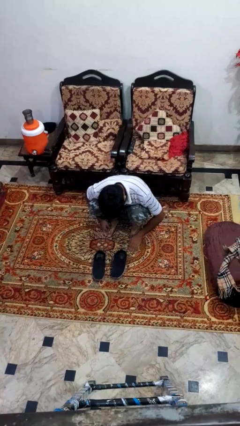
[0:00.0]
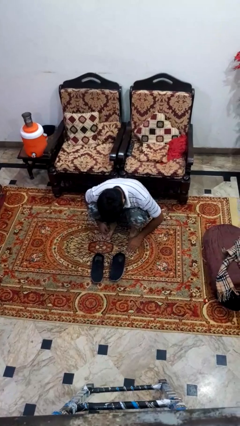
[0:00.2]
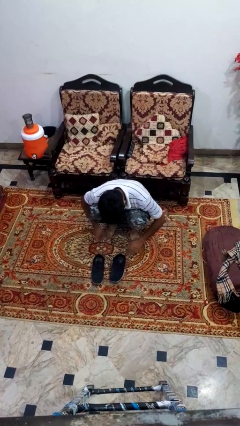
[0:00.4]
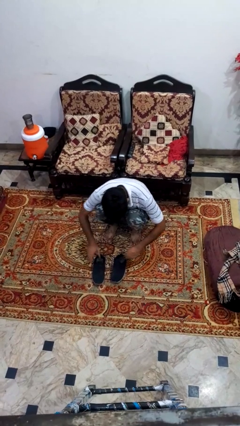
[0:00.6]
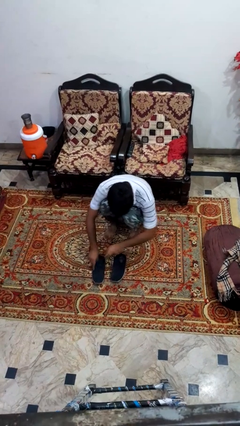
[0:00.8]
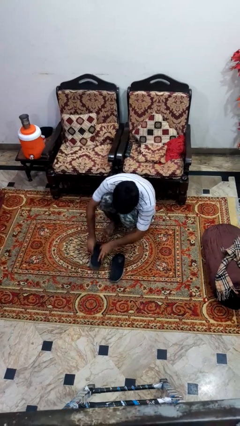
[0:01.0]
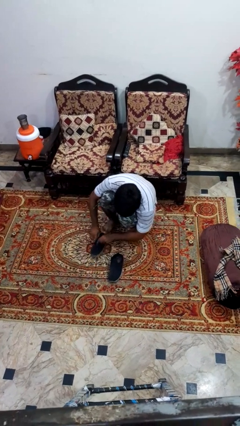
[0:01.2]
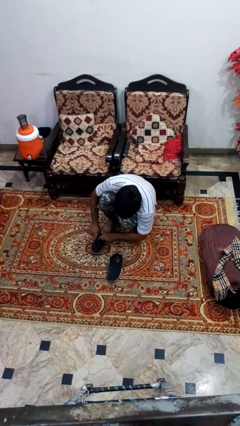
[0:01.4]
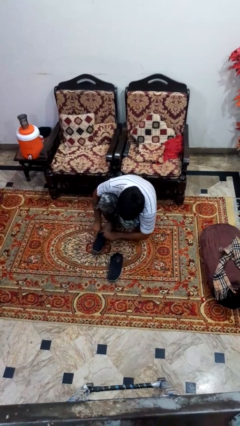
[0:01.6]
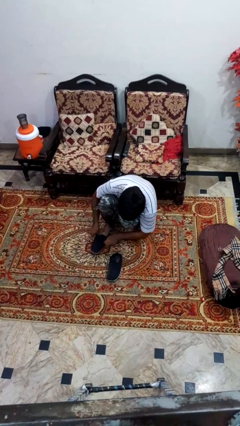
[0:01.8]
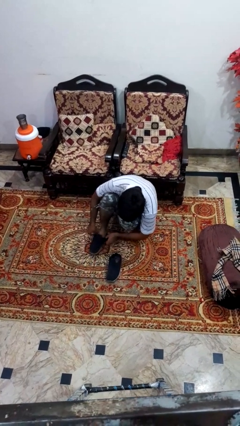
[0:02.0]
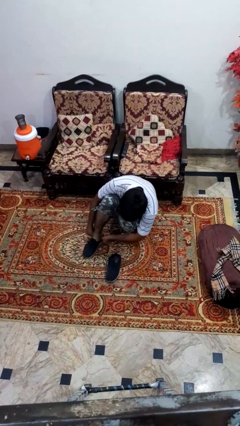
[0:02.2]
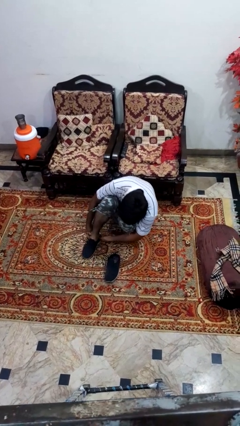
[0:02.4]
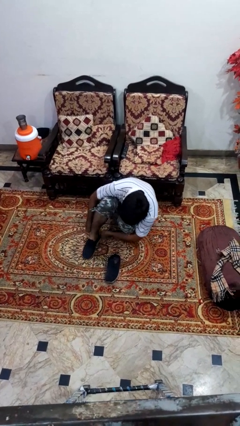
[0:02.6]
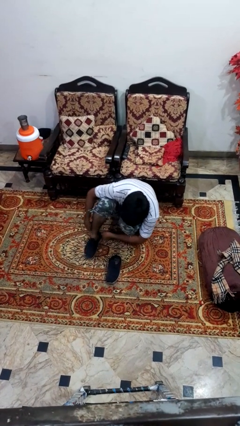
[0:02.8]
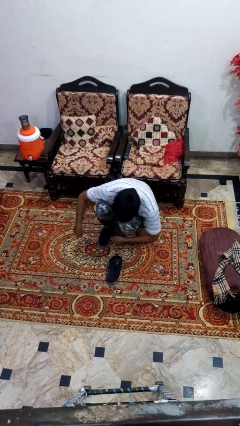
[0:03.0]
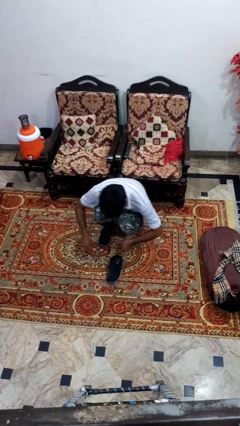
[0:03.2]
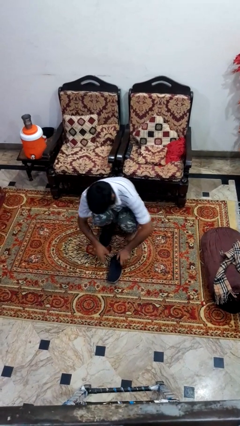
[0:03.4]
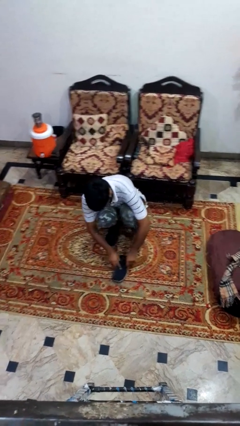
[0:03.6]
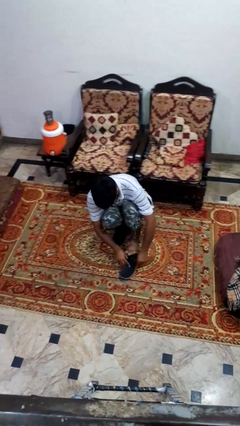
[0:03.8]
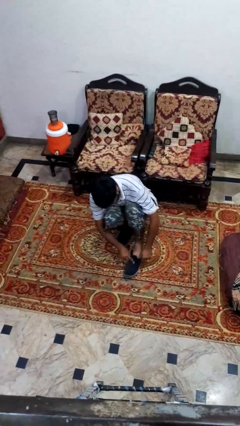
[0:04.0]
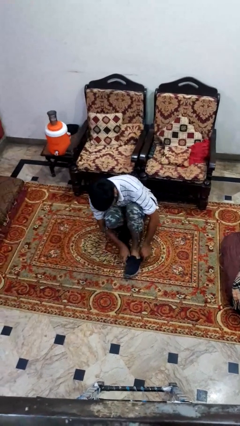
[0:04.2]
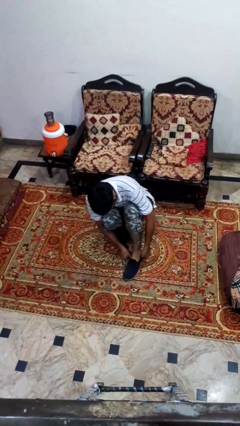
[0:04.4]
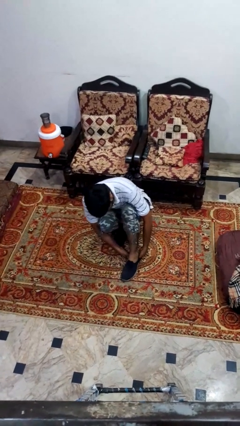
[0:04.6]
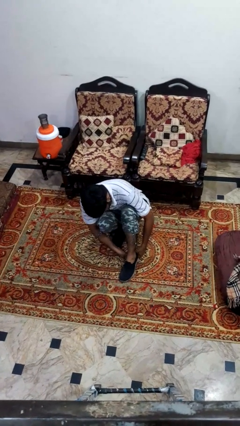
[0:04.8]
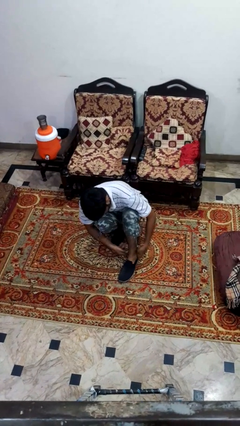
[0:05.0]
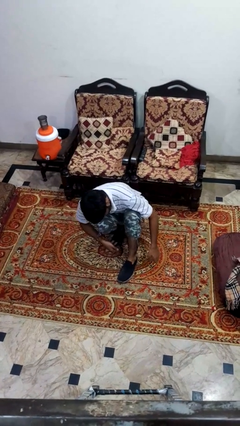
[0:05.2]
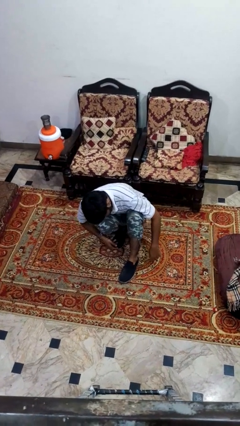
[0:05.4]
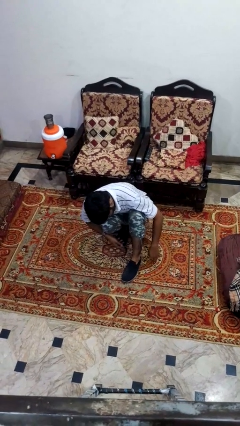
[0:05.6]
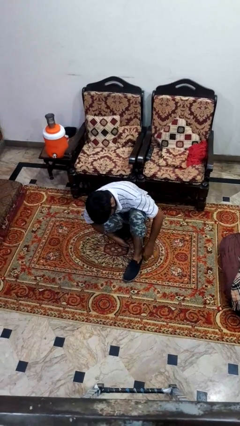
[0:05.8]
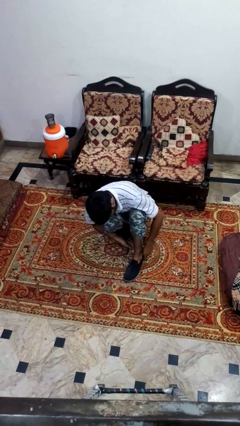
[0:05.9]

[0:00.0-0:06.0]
person puts on shoes

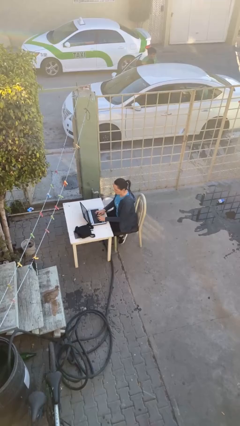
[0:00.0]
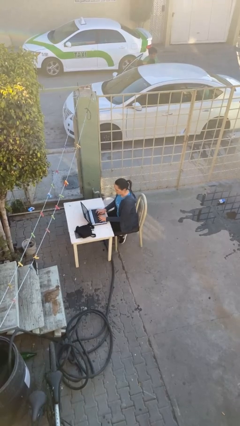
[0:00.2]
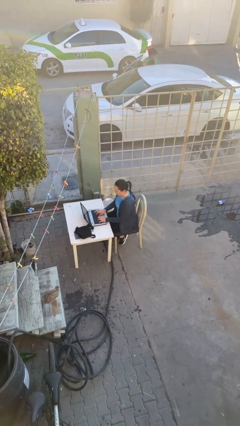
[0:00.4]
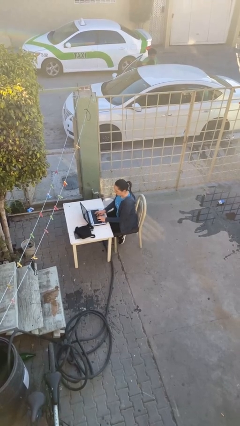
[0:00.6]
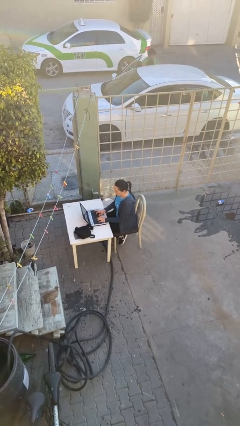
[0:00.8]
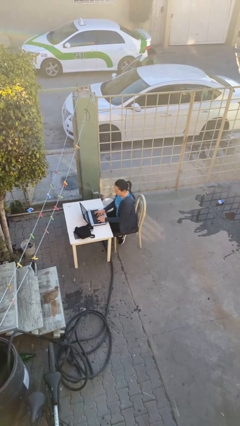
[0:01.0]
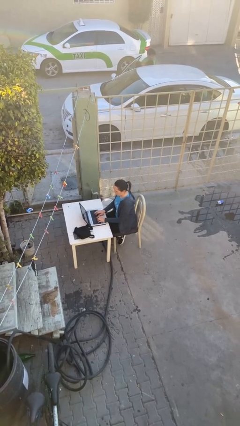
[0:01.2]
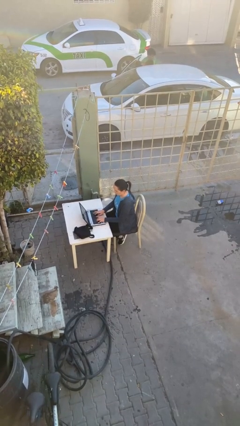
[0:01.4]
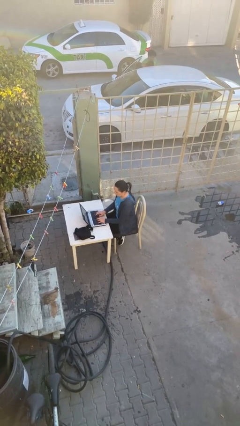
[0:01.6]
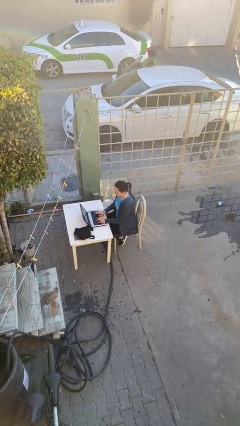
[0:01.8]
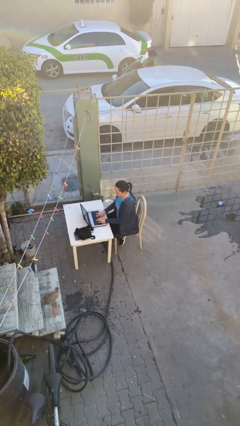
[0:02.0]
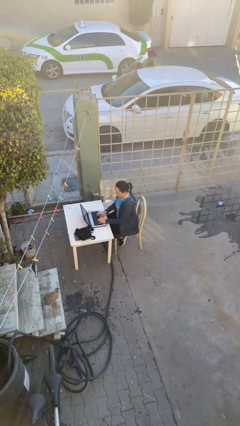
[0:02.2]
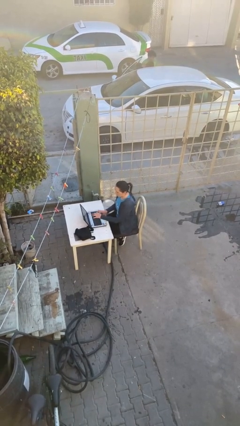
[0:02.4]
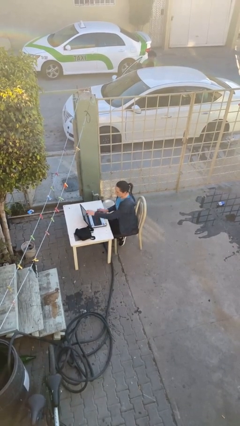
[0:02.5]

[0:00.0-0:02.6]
person interacts with laptop

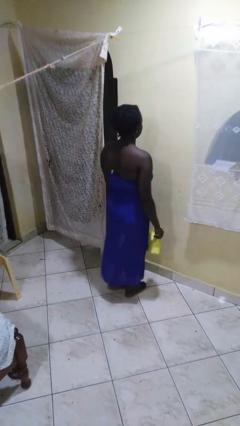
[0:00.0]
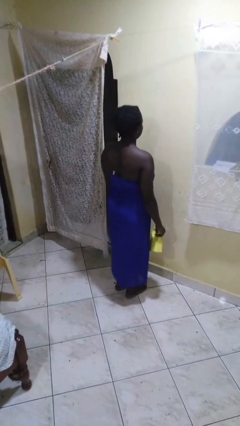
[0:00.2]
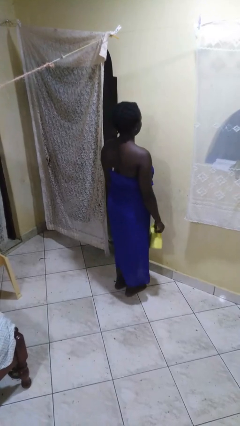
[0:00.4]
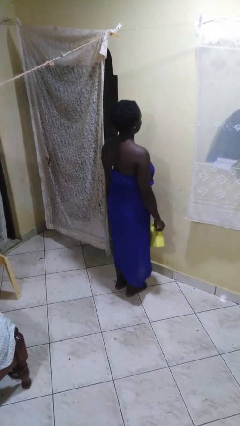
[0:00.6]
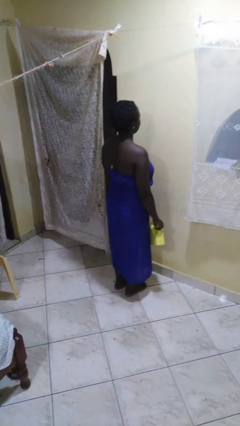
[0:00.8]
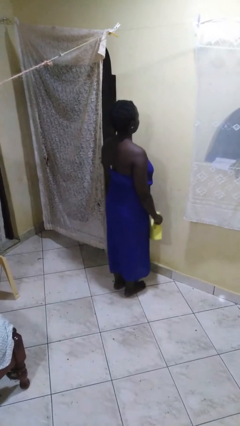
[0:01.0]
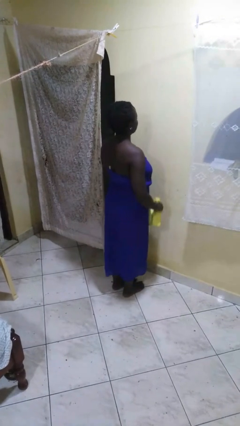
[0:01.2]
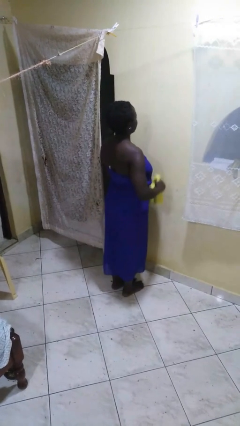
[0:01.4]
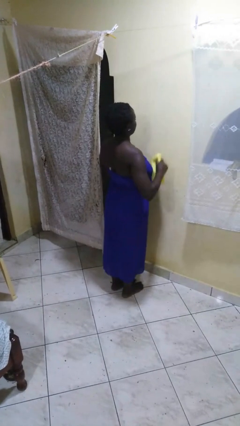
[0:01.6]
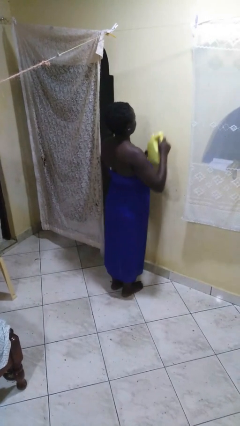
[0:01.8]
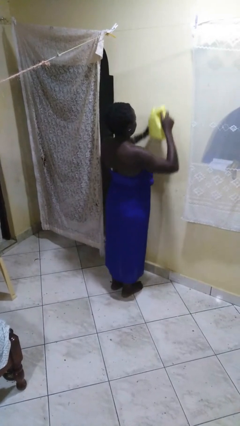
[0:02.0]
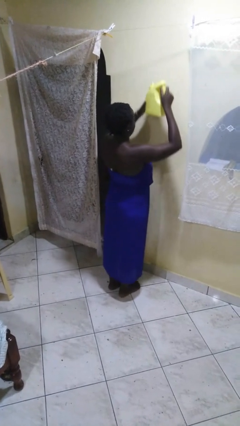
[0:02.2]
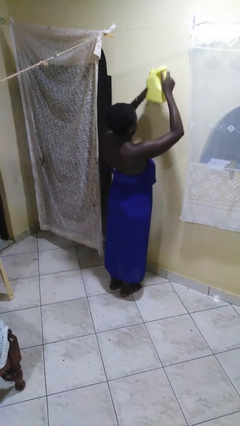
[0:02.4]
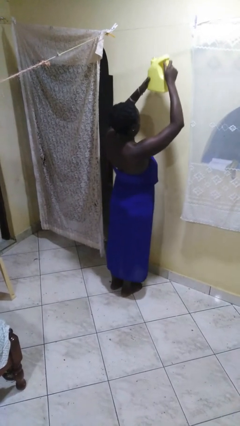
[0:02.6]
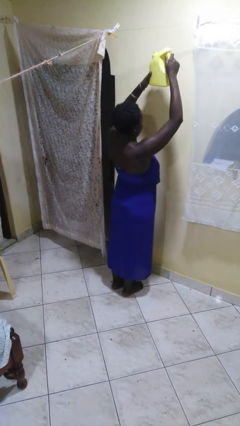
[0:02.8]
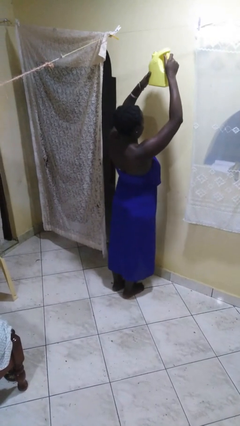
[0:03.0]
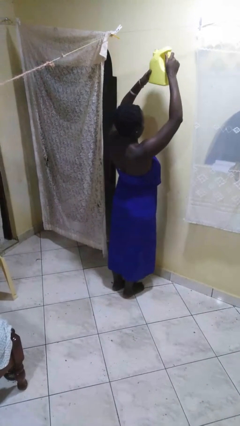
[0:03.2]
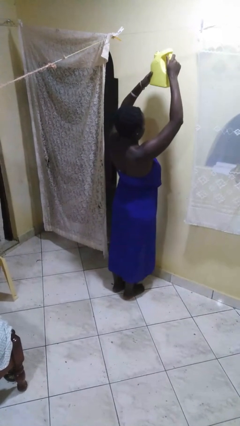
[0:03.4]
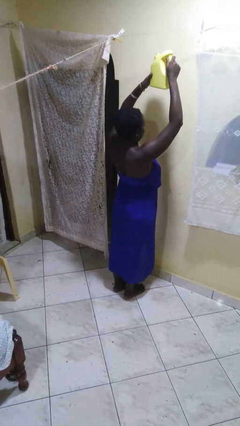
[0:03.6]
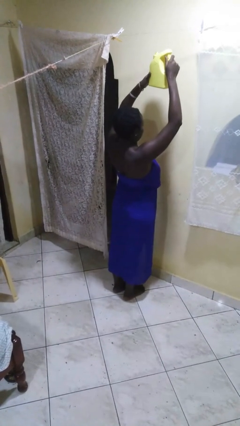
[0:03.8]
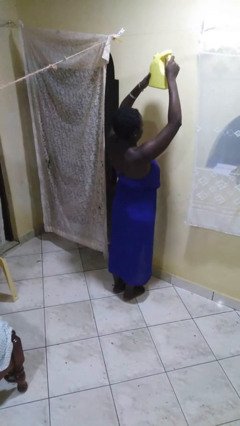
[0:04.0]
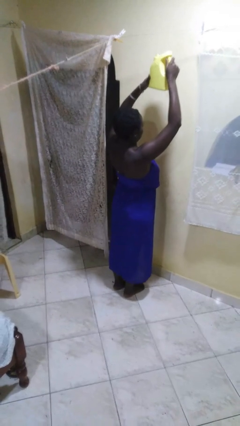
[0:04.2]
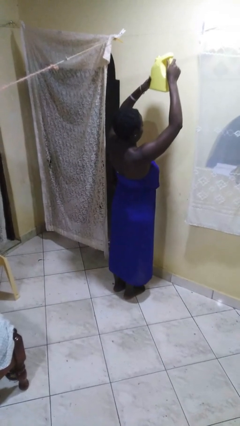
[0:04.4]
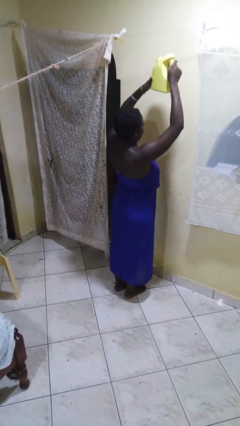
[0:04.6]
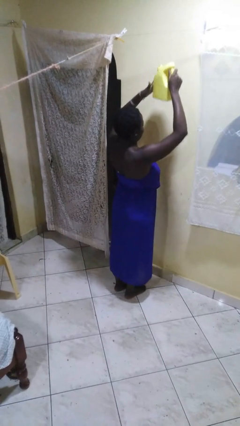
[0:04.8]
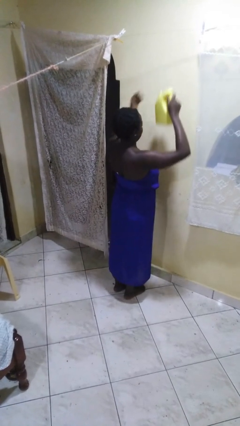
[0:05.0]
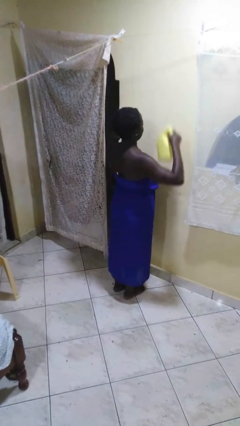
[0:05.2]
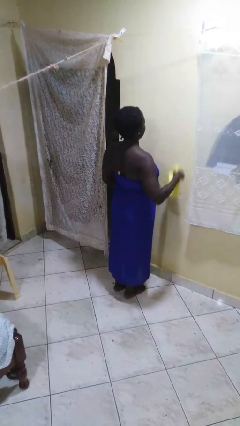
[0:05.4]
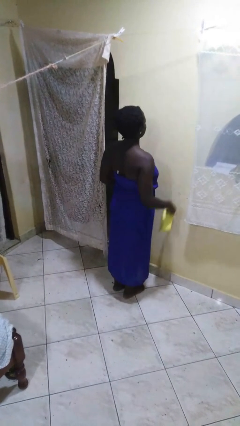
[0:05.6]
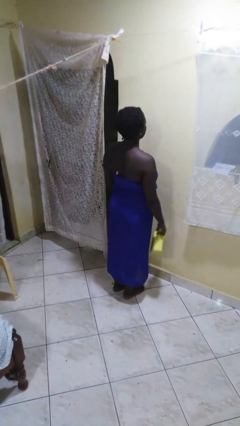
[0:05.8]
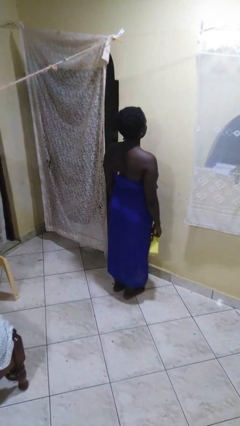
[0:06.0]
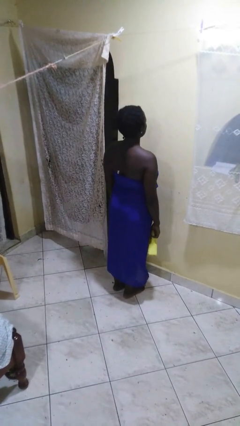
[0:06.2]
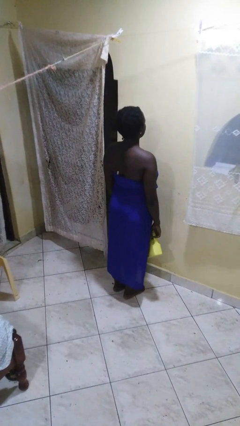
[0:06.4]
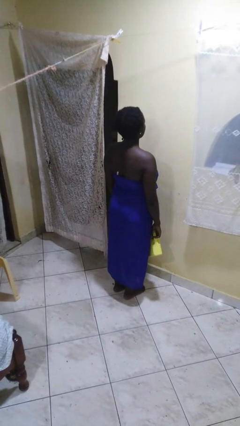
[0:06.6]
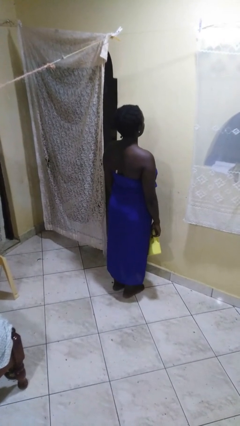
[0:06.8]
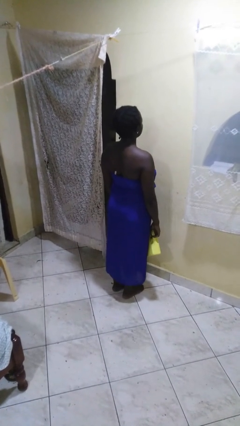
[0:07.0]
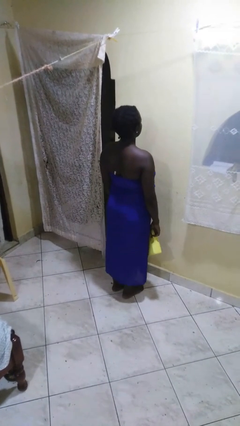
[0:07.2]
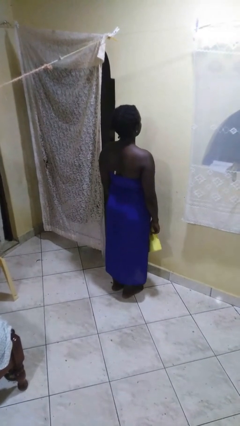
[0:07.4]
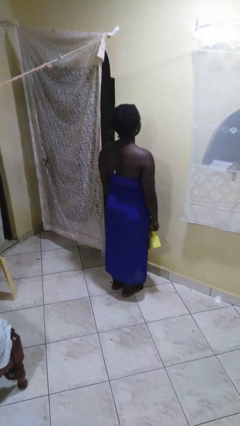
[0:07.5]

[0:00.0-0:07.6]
person holds object above head

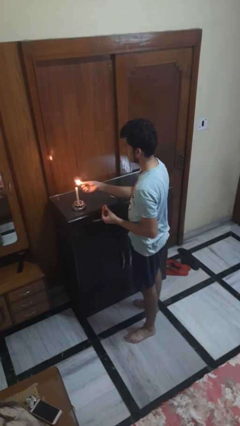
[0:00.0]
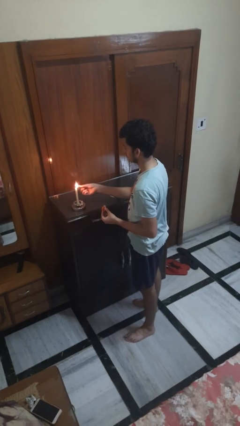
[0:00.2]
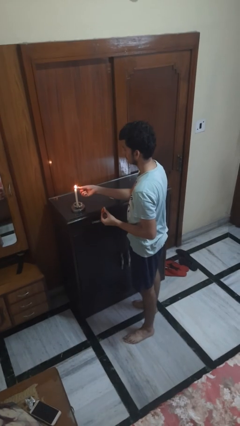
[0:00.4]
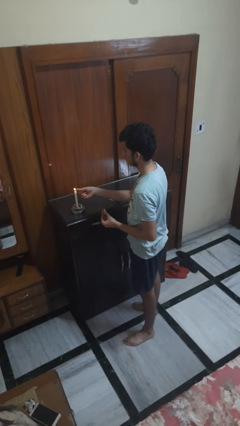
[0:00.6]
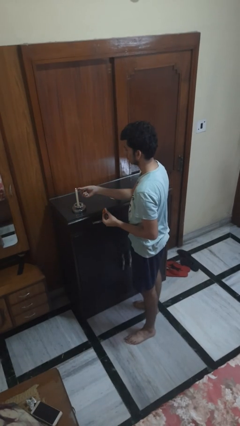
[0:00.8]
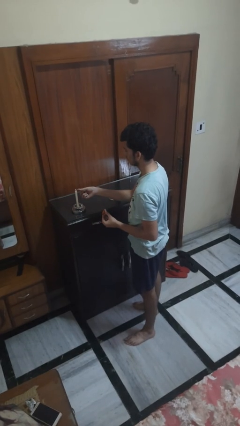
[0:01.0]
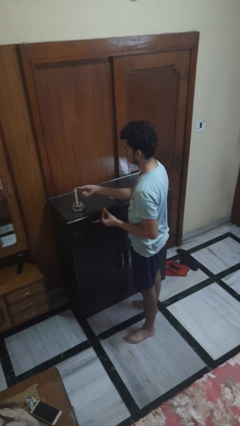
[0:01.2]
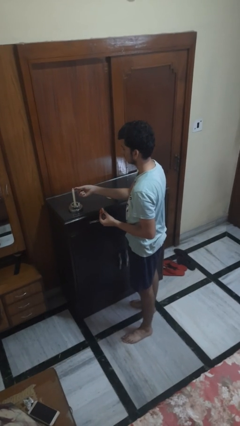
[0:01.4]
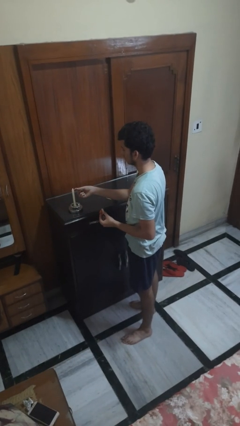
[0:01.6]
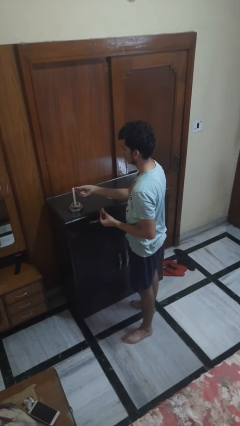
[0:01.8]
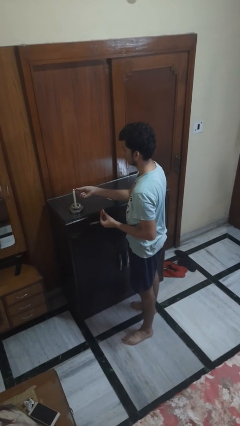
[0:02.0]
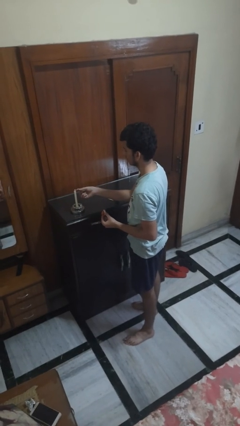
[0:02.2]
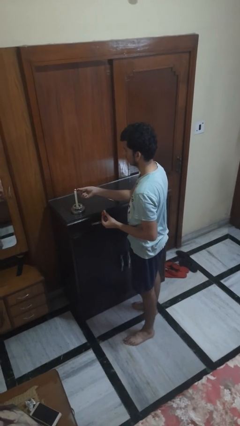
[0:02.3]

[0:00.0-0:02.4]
person lights candle
